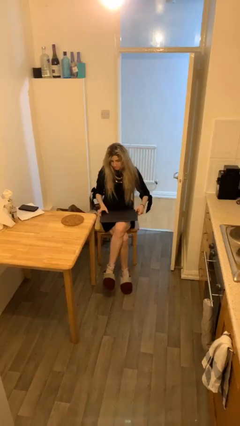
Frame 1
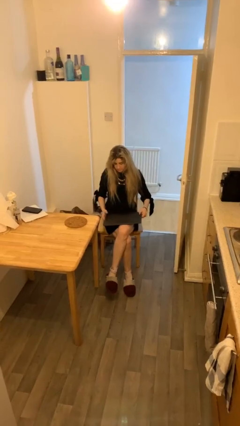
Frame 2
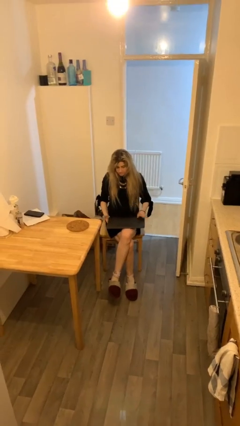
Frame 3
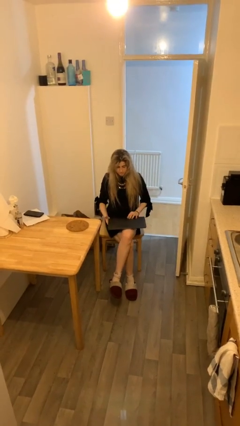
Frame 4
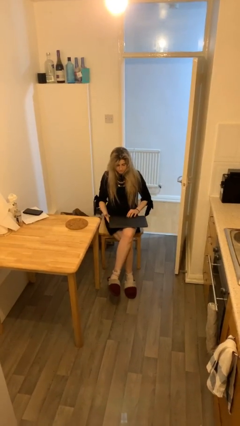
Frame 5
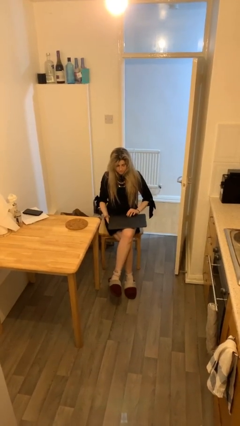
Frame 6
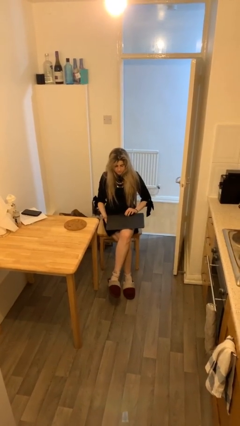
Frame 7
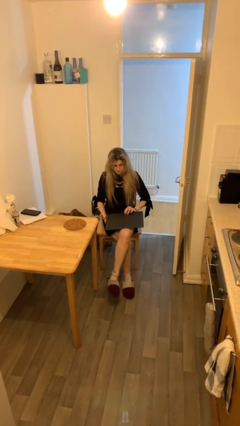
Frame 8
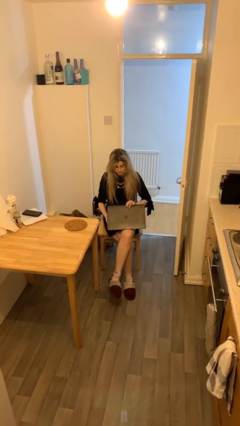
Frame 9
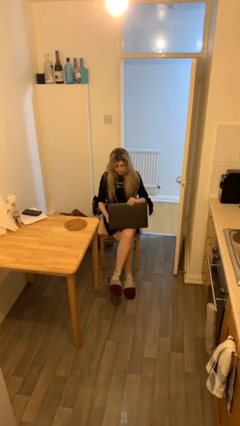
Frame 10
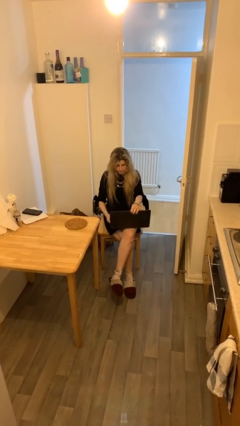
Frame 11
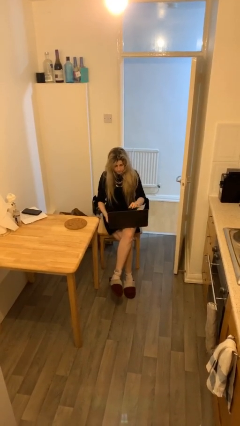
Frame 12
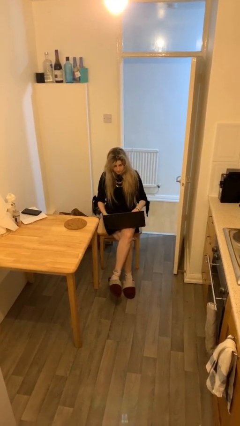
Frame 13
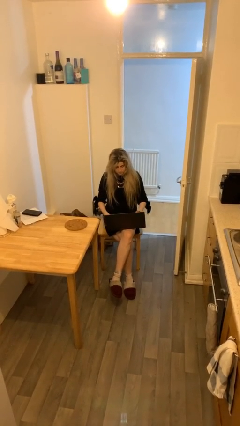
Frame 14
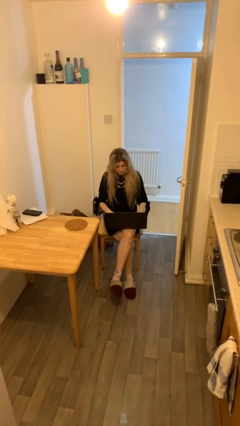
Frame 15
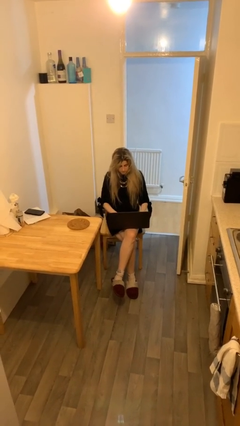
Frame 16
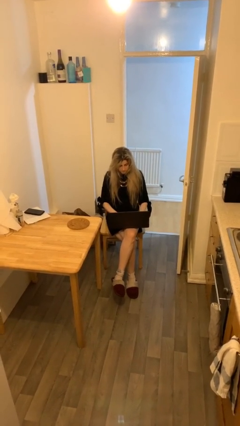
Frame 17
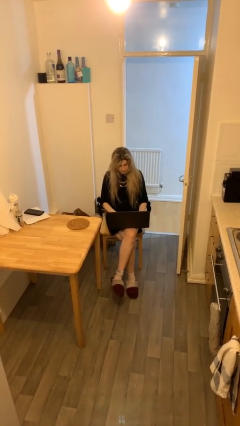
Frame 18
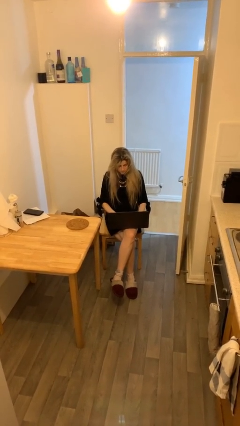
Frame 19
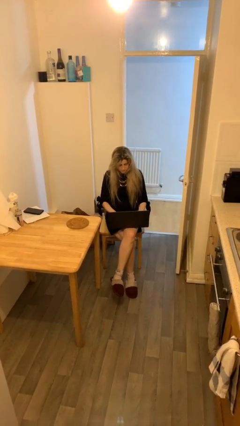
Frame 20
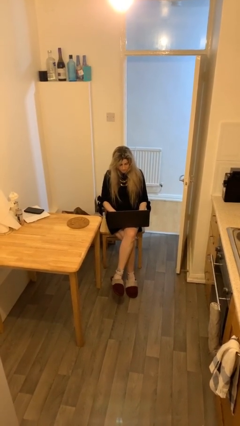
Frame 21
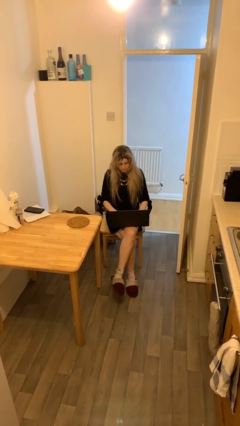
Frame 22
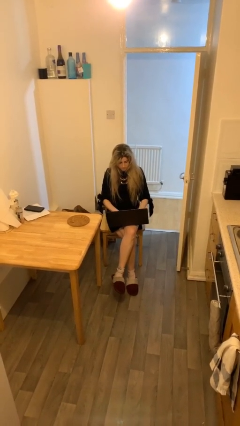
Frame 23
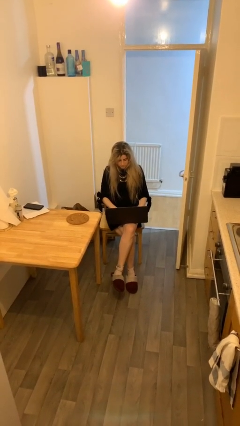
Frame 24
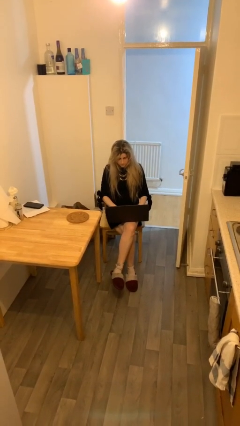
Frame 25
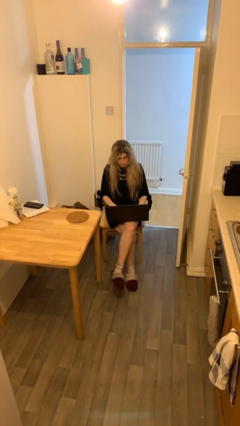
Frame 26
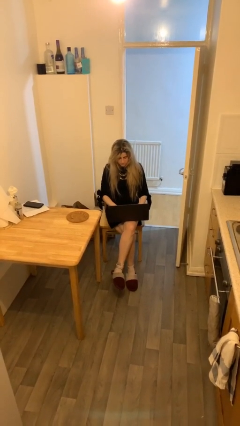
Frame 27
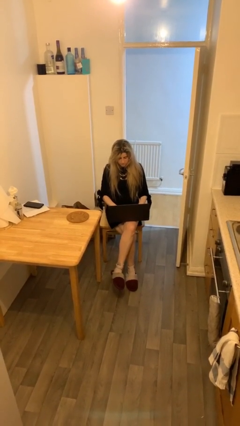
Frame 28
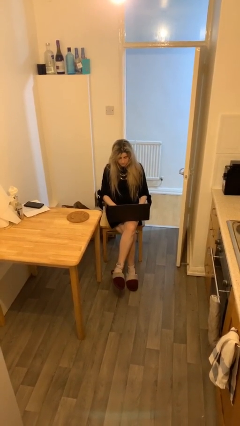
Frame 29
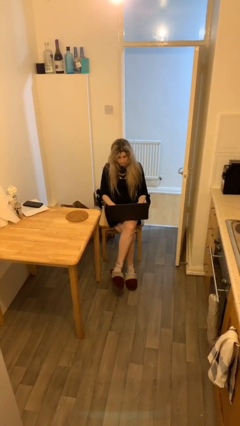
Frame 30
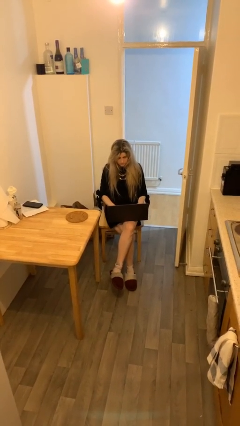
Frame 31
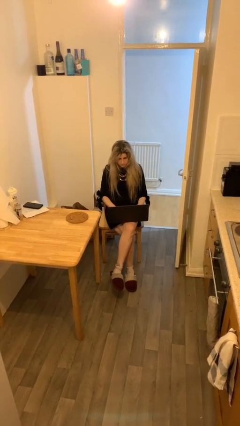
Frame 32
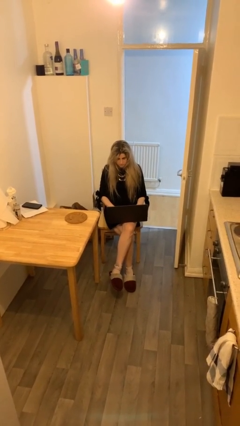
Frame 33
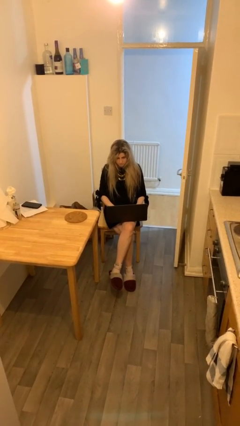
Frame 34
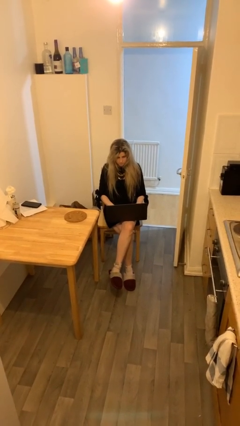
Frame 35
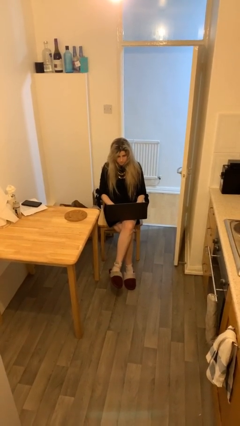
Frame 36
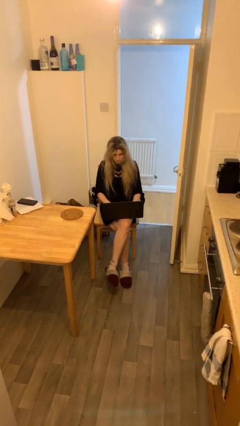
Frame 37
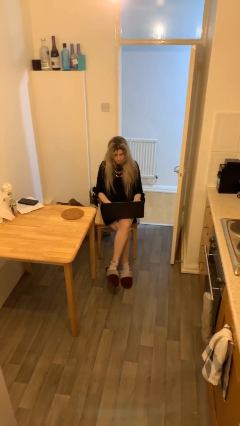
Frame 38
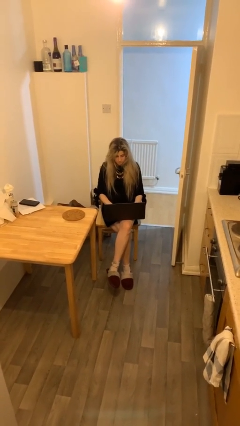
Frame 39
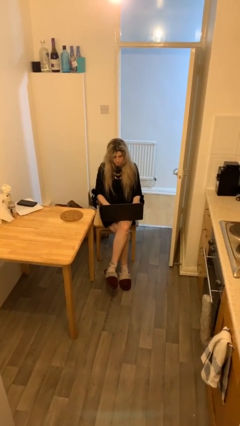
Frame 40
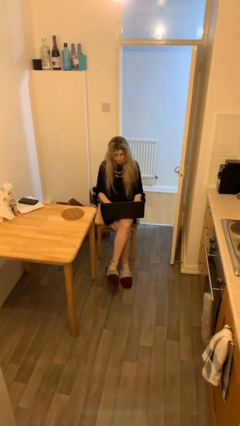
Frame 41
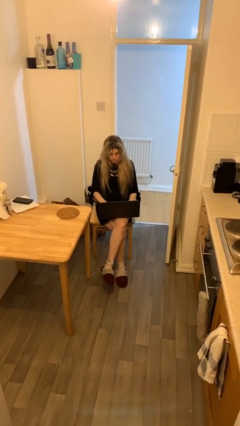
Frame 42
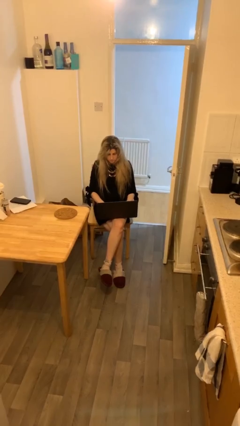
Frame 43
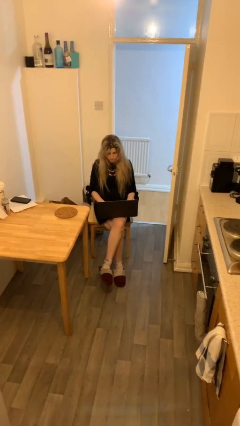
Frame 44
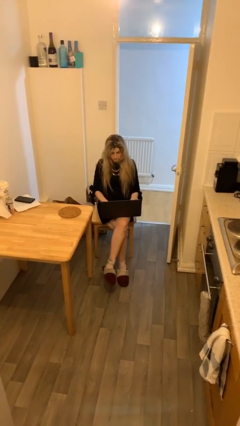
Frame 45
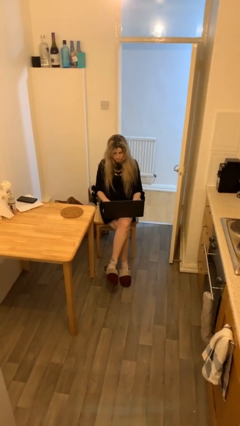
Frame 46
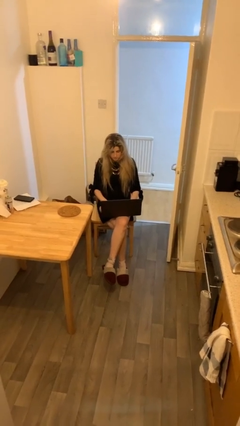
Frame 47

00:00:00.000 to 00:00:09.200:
person interacts with laptop

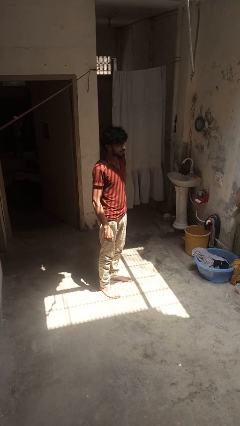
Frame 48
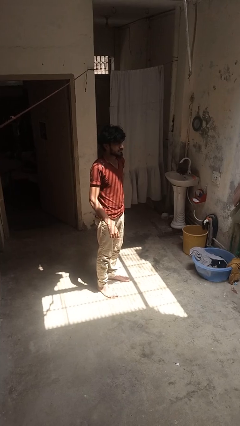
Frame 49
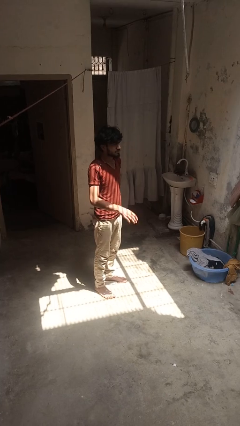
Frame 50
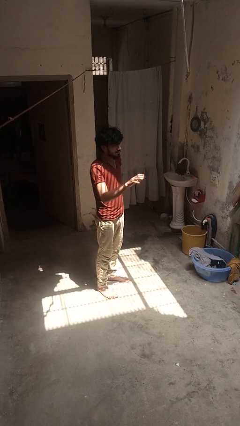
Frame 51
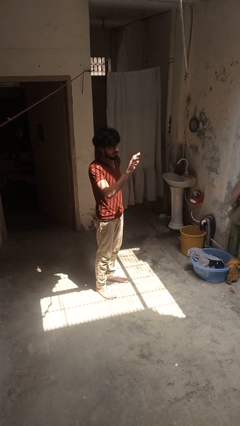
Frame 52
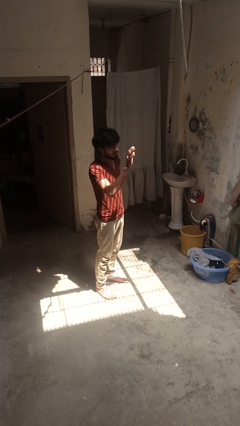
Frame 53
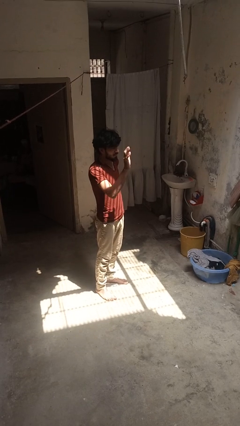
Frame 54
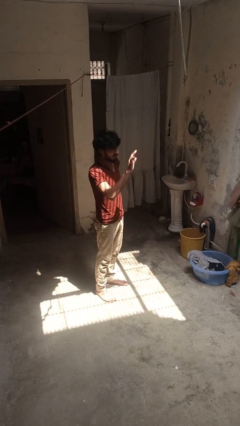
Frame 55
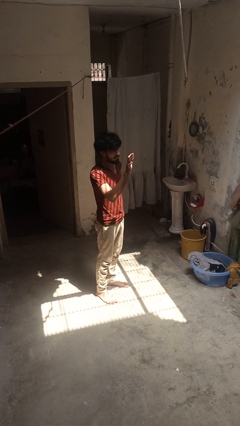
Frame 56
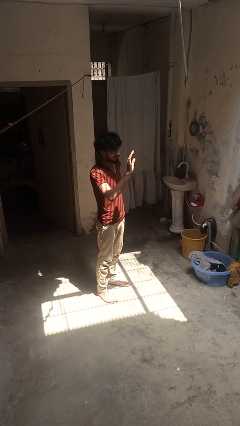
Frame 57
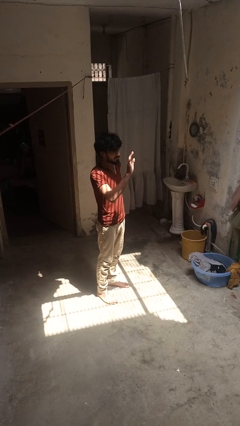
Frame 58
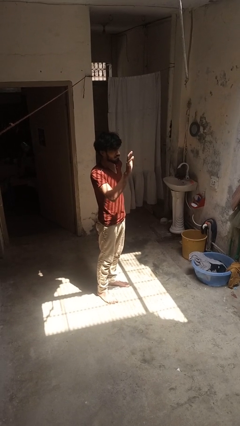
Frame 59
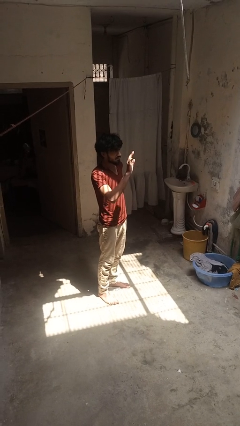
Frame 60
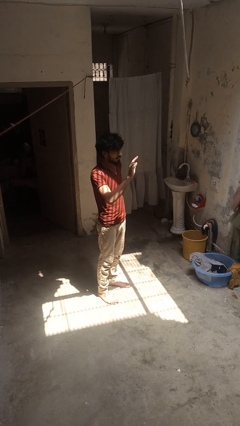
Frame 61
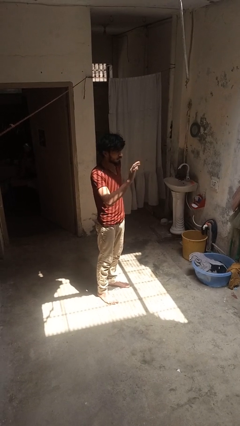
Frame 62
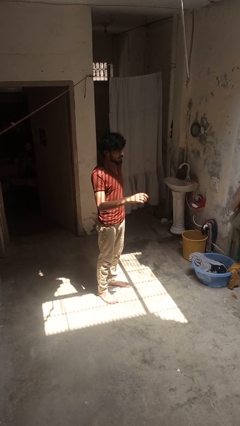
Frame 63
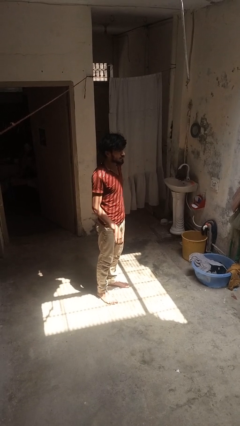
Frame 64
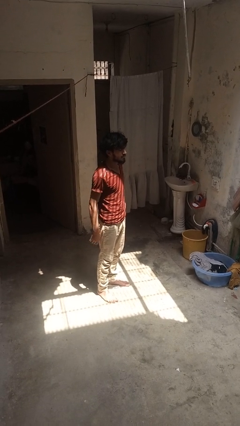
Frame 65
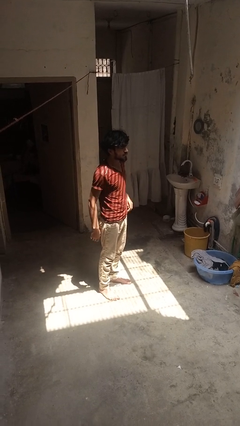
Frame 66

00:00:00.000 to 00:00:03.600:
person waves at person

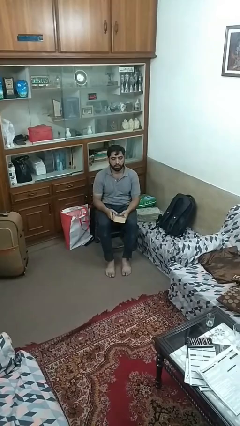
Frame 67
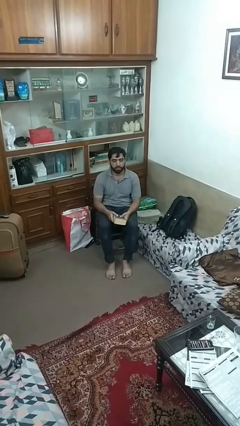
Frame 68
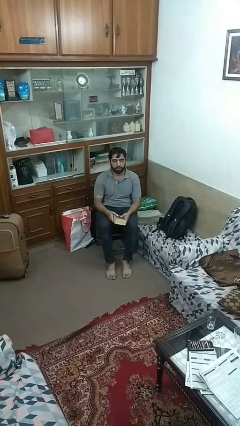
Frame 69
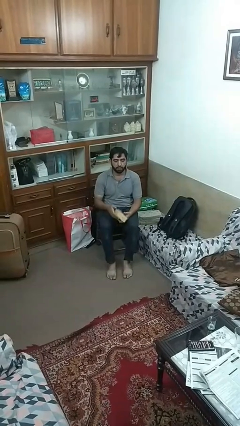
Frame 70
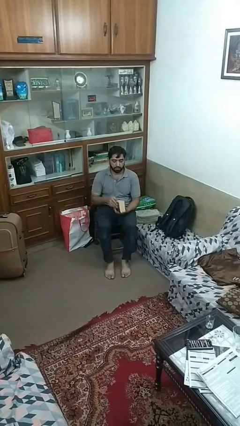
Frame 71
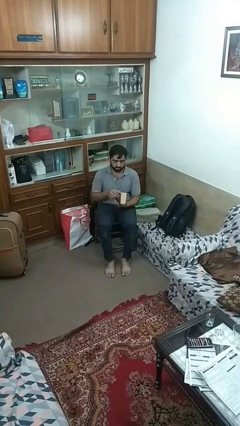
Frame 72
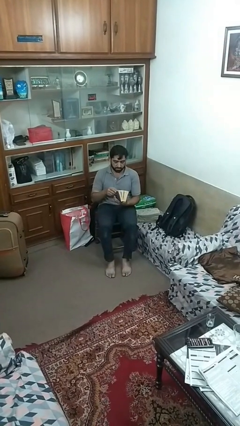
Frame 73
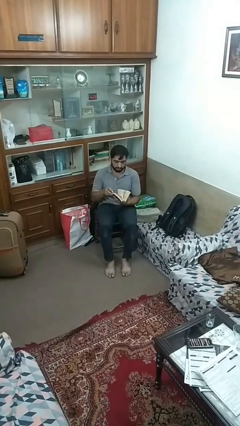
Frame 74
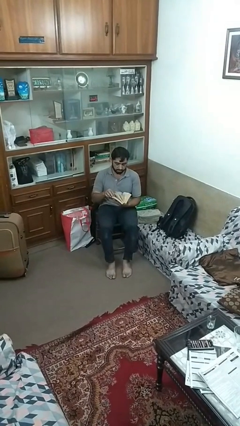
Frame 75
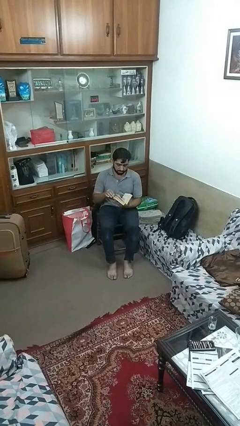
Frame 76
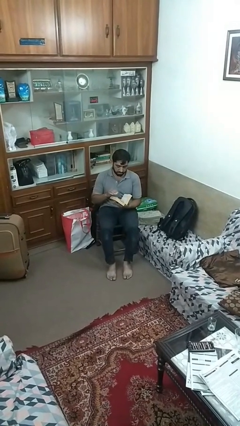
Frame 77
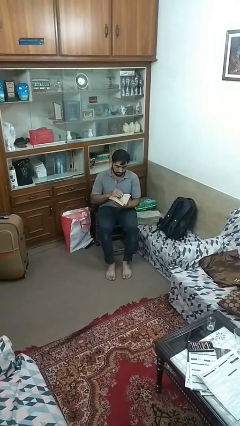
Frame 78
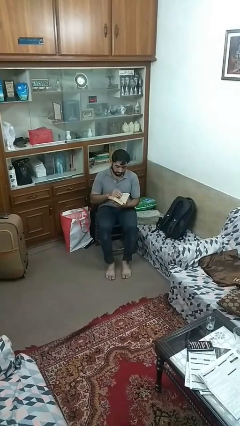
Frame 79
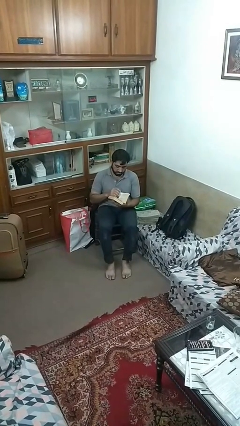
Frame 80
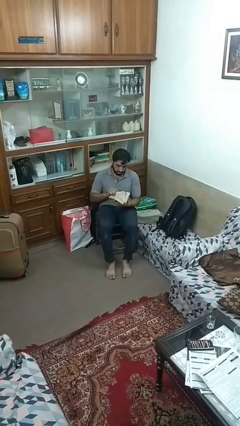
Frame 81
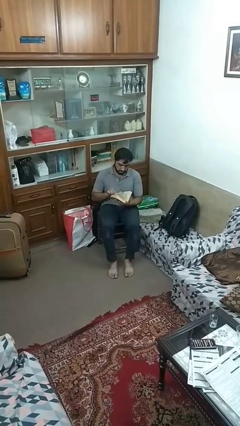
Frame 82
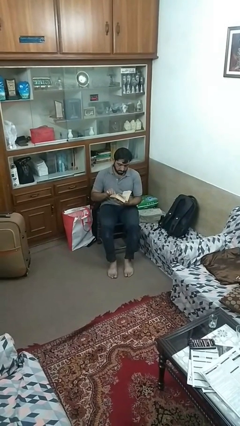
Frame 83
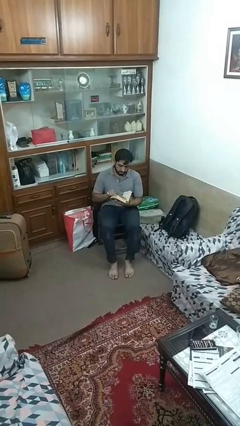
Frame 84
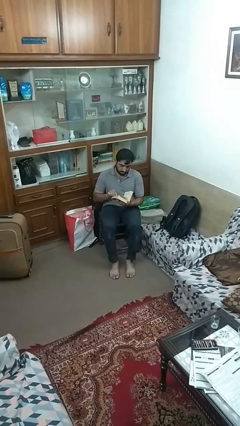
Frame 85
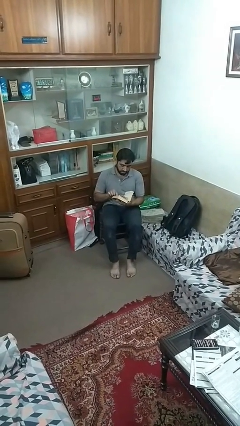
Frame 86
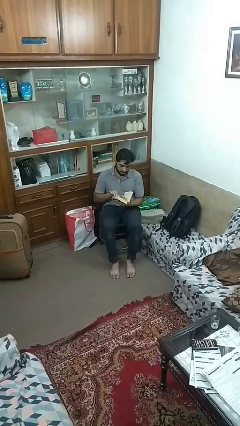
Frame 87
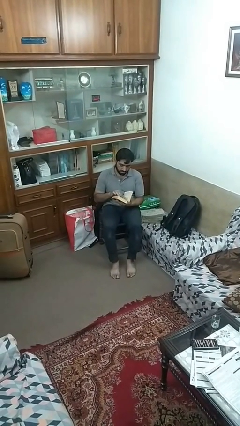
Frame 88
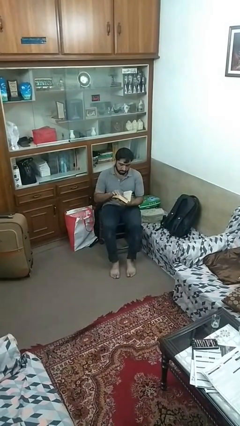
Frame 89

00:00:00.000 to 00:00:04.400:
person reads book

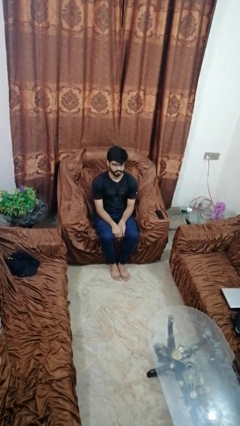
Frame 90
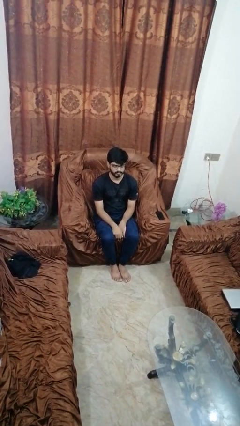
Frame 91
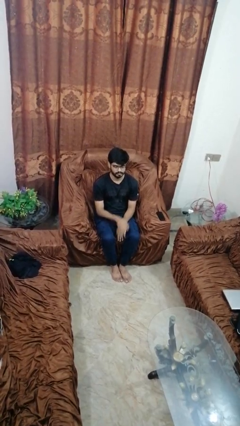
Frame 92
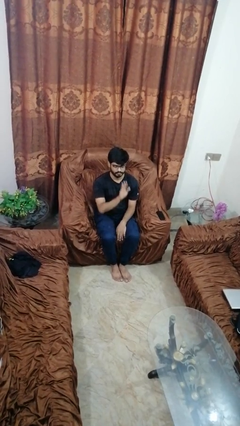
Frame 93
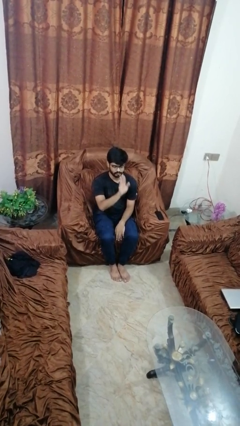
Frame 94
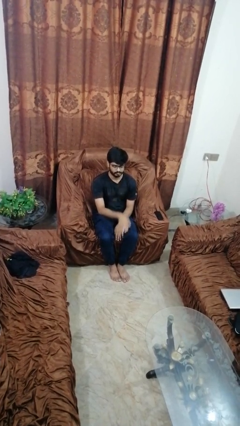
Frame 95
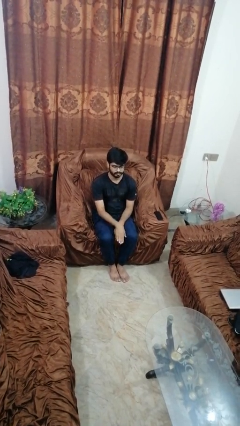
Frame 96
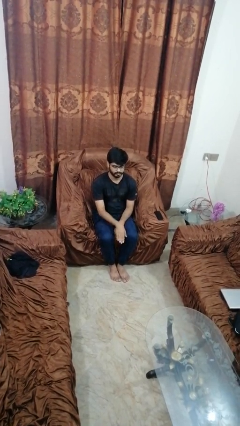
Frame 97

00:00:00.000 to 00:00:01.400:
person gestures swipe down
